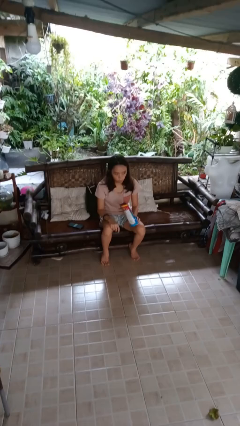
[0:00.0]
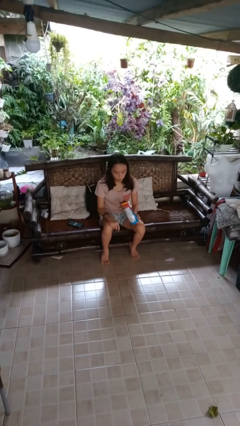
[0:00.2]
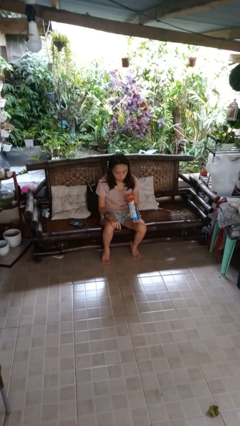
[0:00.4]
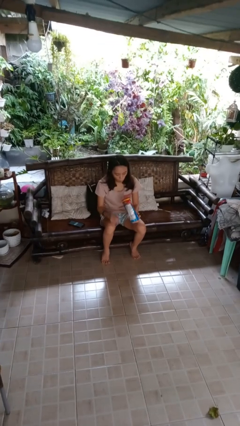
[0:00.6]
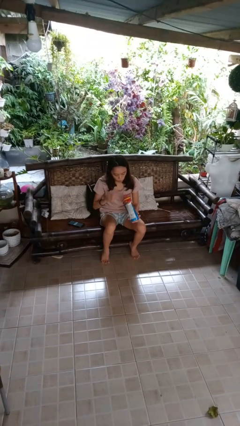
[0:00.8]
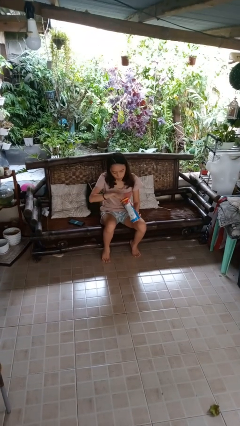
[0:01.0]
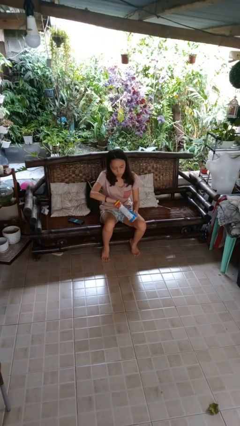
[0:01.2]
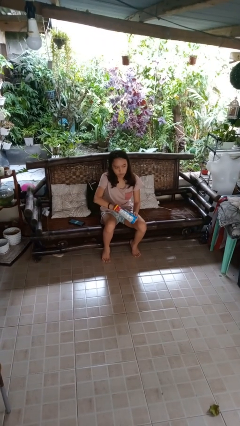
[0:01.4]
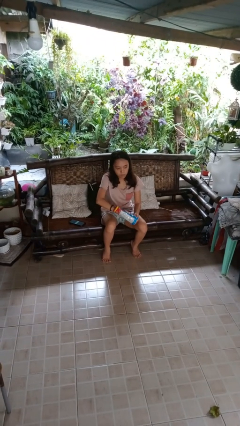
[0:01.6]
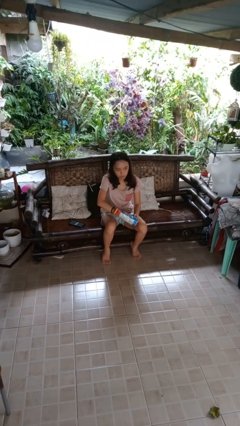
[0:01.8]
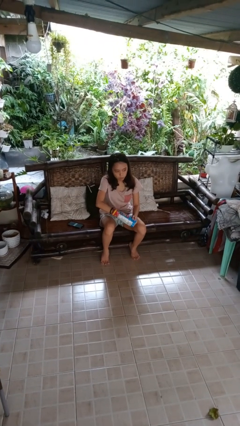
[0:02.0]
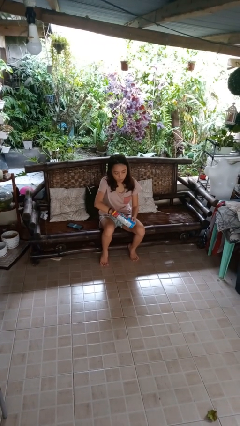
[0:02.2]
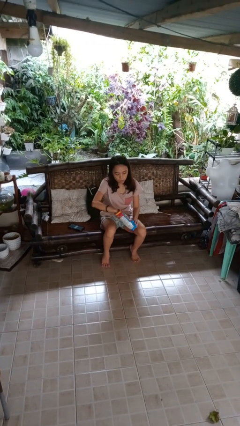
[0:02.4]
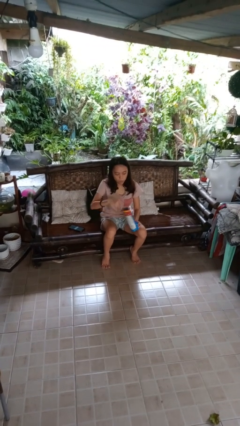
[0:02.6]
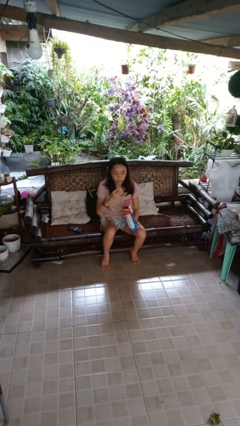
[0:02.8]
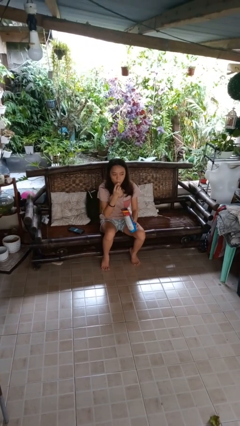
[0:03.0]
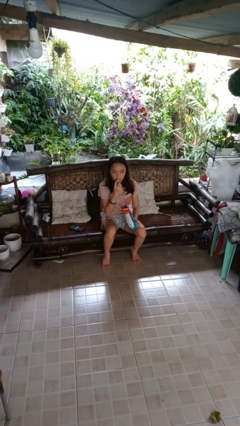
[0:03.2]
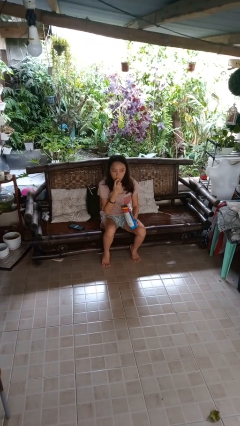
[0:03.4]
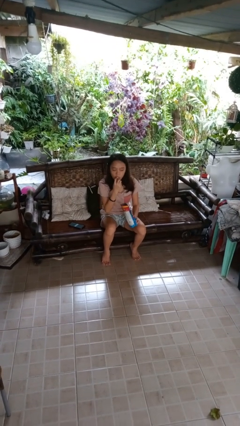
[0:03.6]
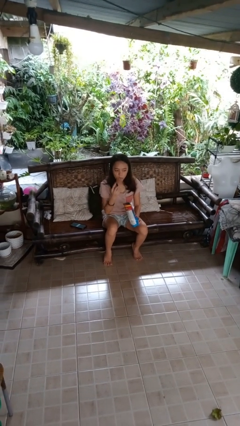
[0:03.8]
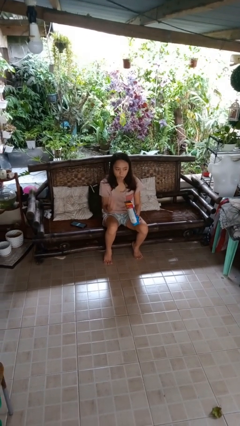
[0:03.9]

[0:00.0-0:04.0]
person eats snack from bag

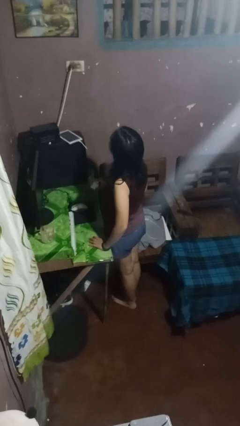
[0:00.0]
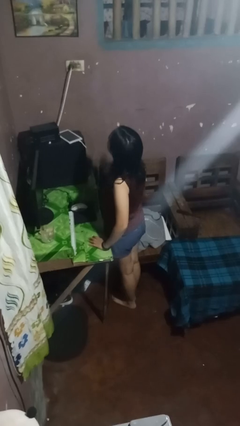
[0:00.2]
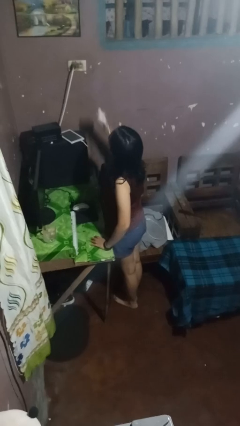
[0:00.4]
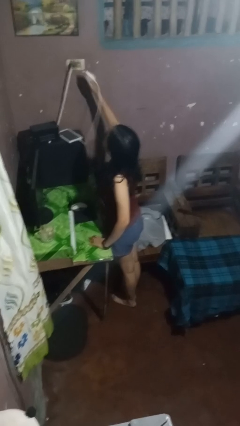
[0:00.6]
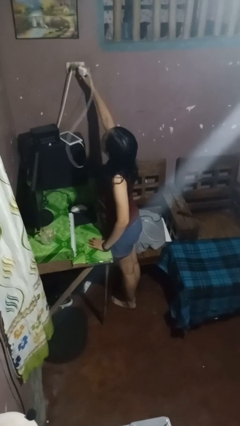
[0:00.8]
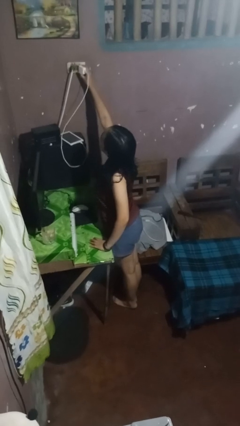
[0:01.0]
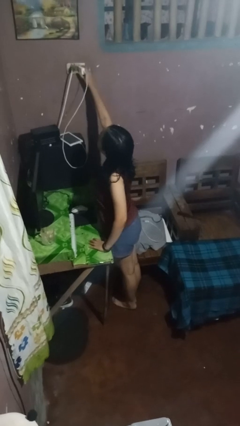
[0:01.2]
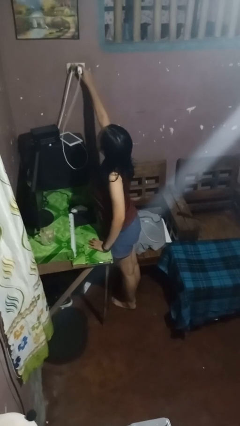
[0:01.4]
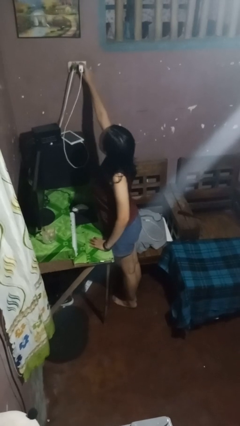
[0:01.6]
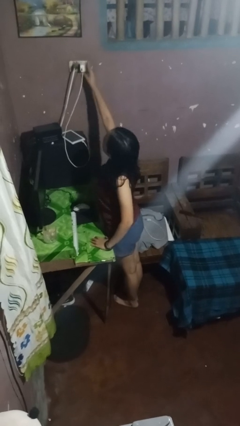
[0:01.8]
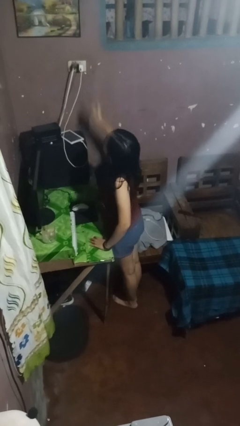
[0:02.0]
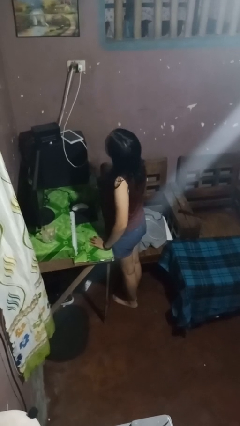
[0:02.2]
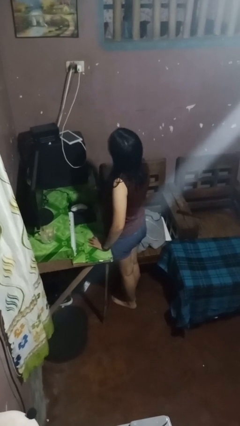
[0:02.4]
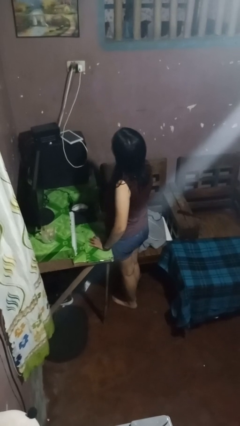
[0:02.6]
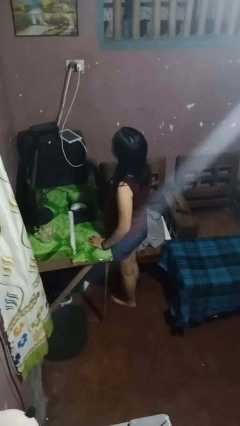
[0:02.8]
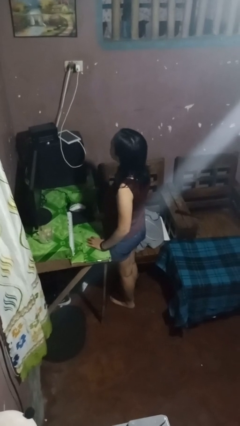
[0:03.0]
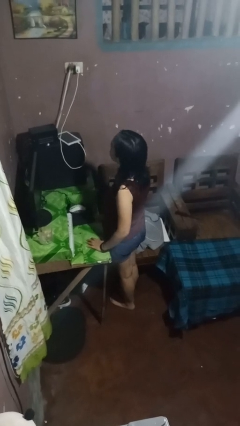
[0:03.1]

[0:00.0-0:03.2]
person plugs into electrical socket

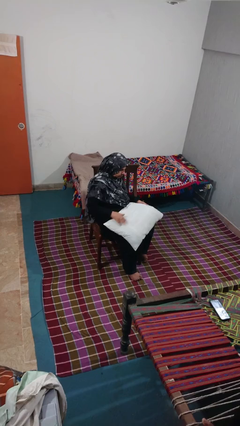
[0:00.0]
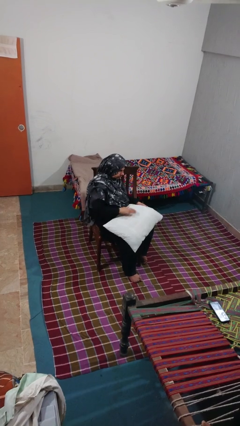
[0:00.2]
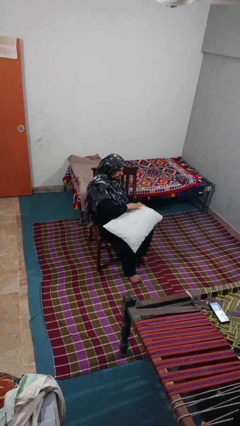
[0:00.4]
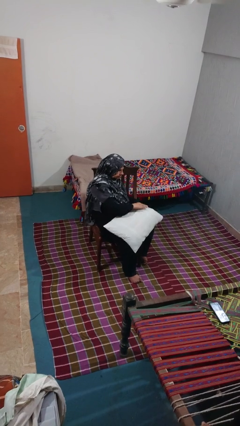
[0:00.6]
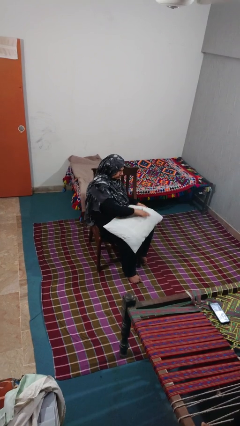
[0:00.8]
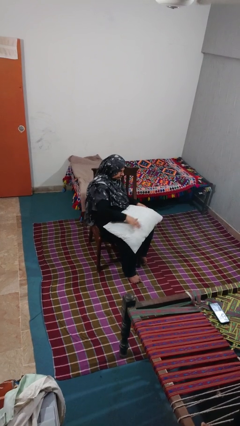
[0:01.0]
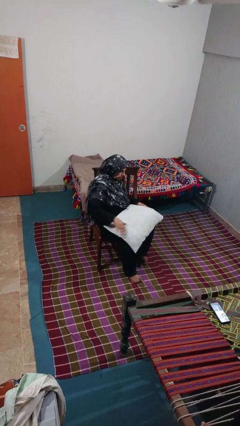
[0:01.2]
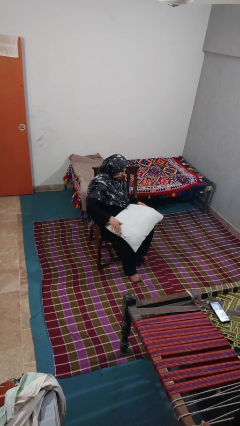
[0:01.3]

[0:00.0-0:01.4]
person waves hand over object

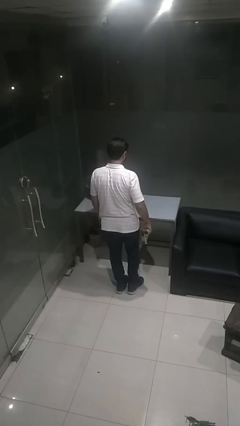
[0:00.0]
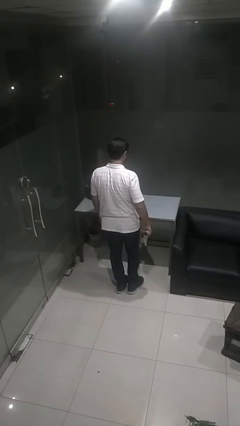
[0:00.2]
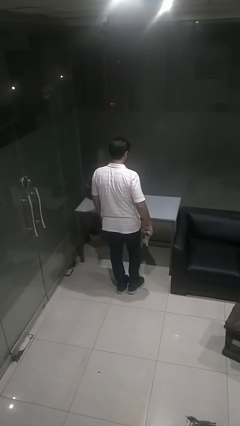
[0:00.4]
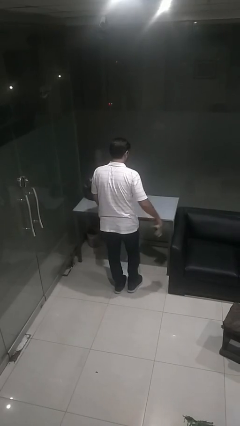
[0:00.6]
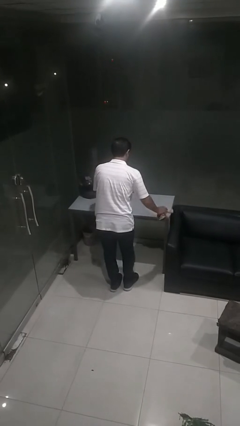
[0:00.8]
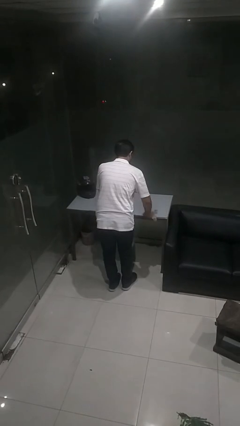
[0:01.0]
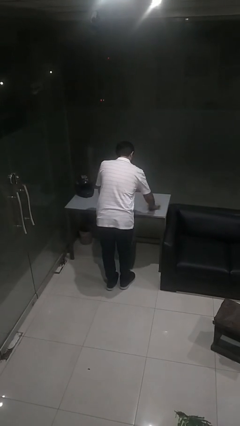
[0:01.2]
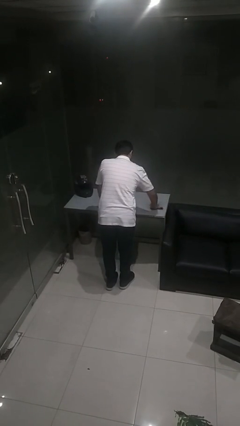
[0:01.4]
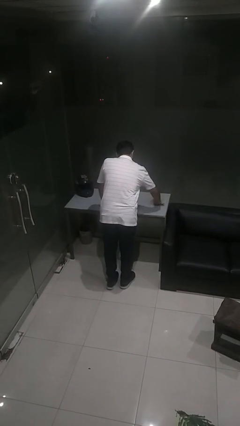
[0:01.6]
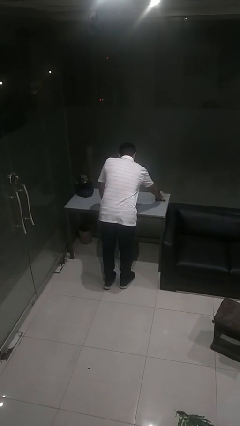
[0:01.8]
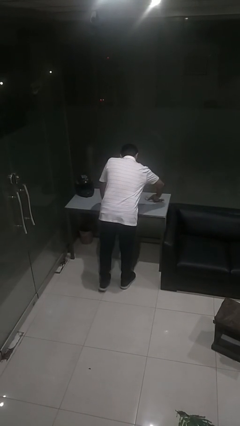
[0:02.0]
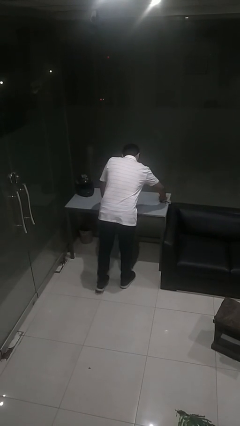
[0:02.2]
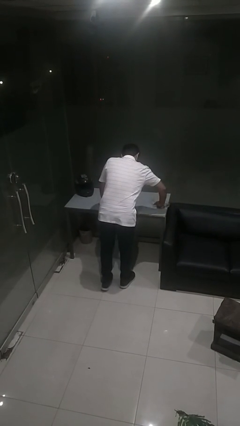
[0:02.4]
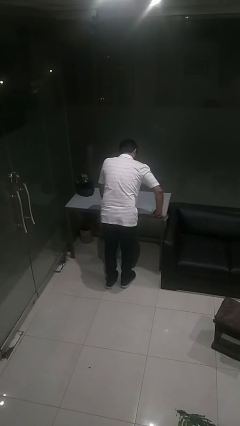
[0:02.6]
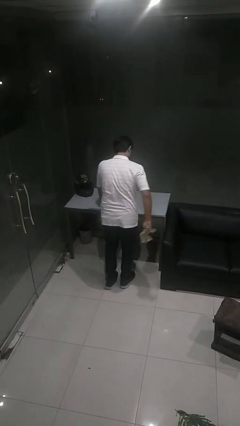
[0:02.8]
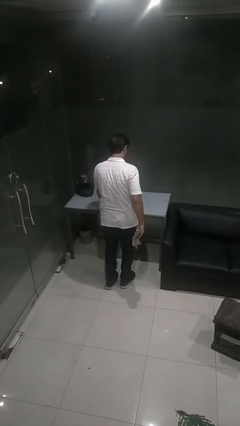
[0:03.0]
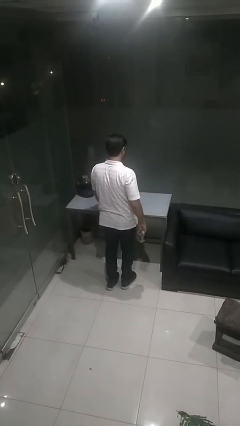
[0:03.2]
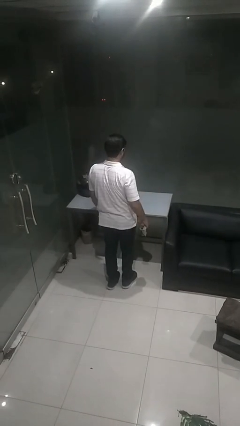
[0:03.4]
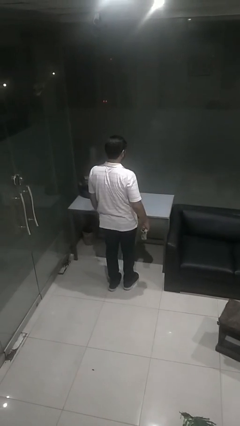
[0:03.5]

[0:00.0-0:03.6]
person cleans table with rag

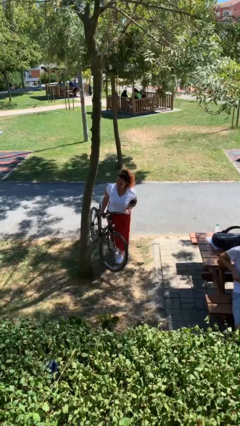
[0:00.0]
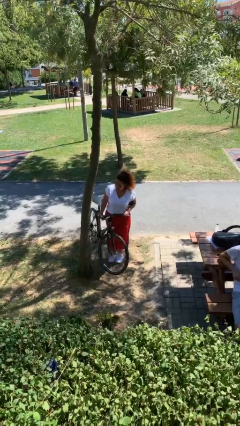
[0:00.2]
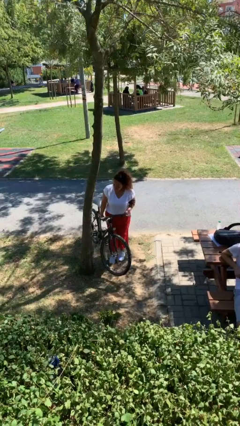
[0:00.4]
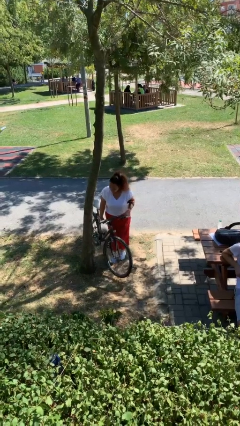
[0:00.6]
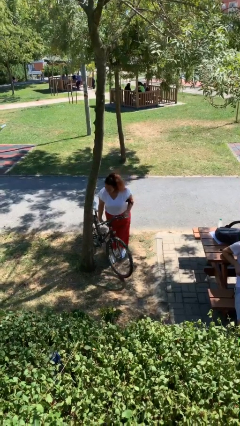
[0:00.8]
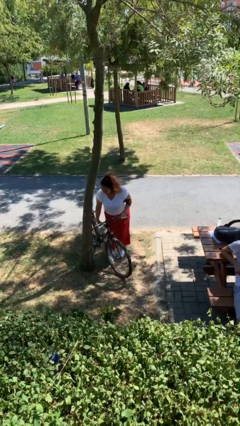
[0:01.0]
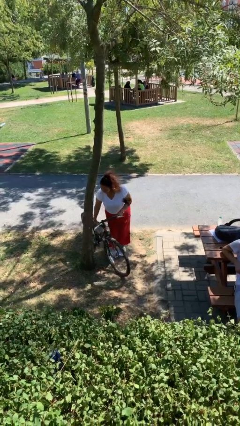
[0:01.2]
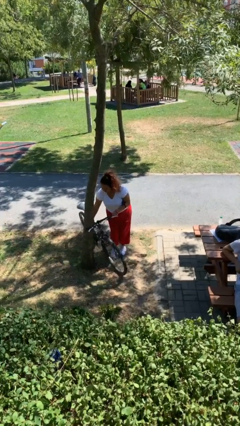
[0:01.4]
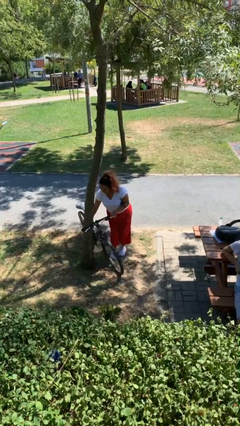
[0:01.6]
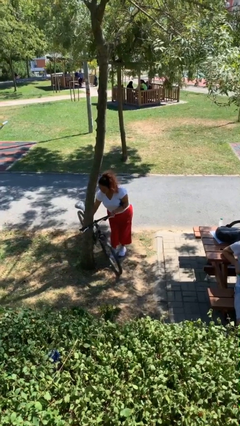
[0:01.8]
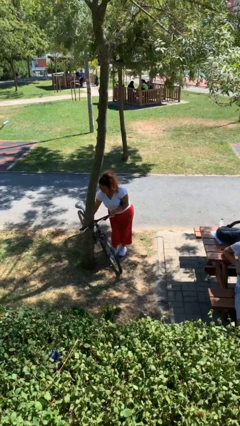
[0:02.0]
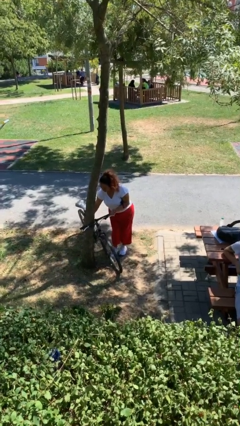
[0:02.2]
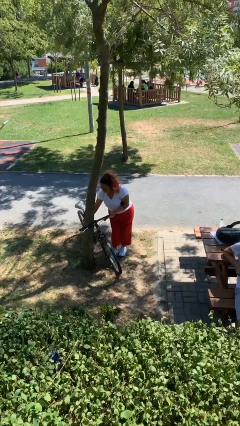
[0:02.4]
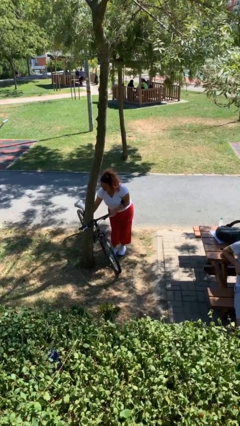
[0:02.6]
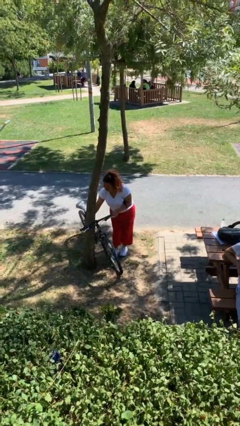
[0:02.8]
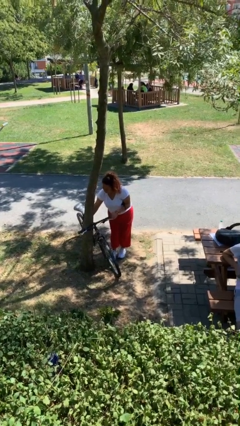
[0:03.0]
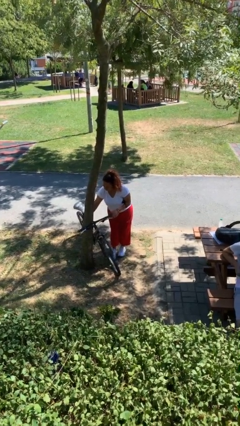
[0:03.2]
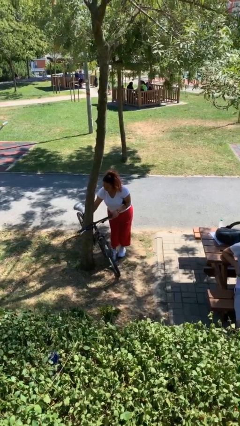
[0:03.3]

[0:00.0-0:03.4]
person puts down object on floor

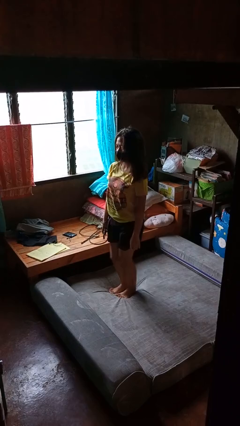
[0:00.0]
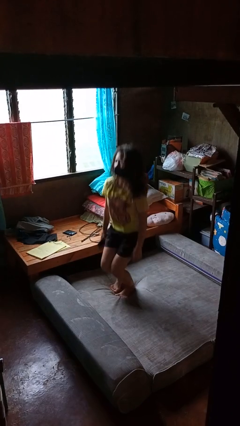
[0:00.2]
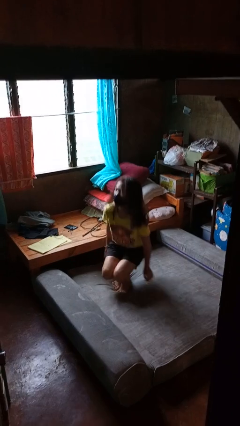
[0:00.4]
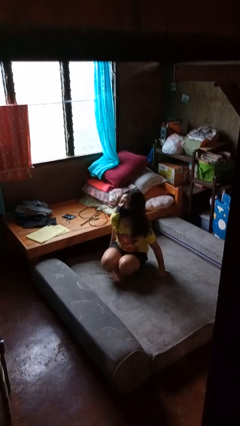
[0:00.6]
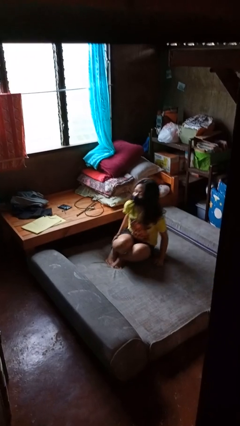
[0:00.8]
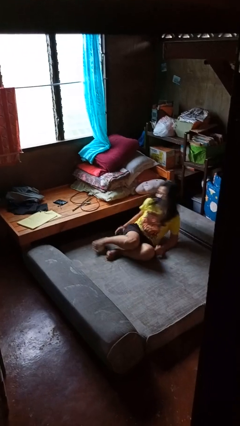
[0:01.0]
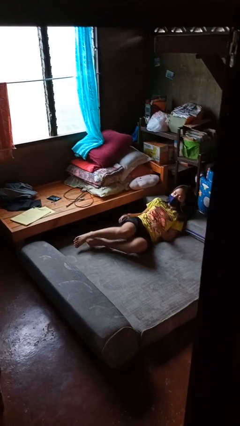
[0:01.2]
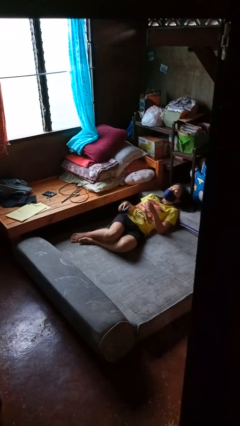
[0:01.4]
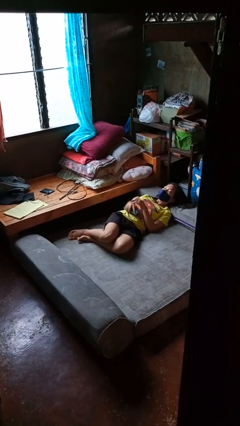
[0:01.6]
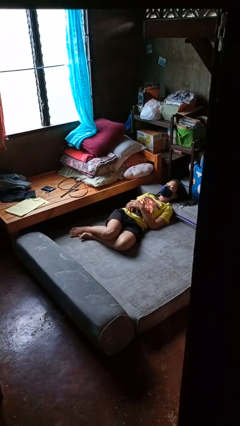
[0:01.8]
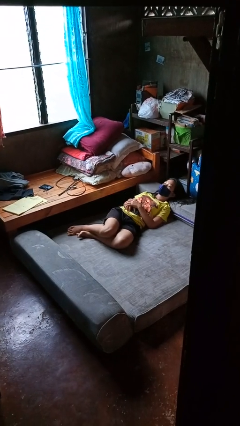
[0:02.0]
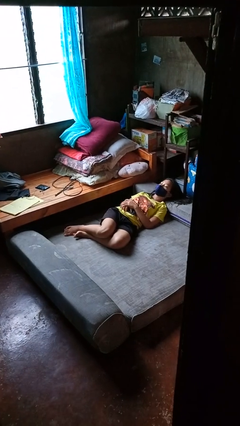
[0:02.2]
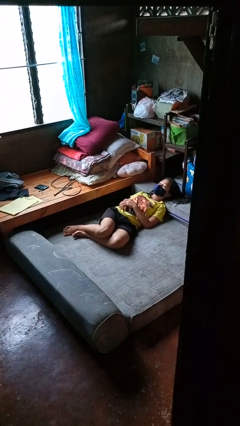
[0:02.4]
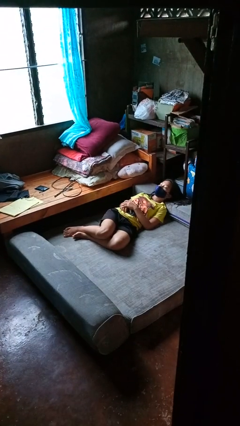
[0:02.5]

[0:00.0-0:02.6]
person lies down on bed
